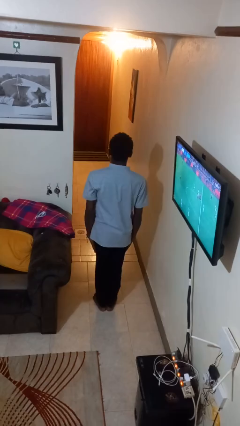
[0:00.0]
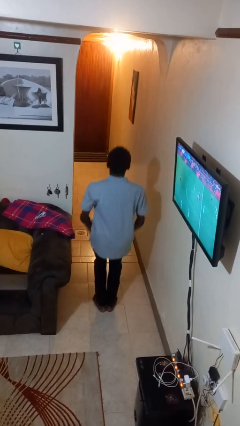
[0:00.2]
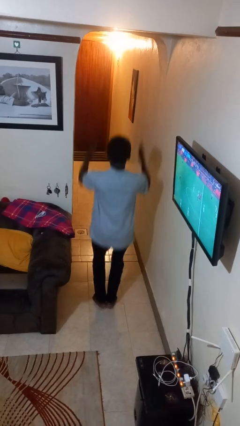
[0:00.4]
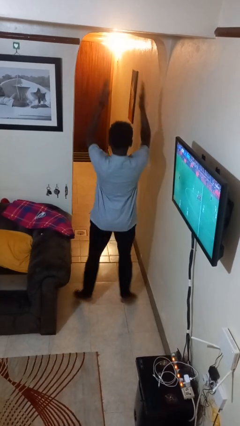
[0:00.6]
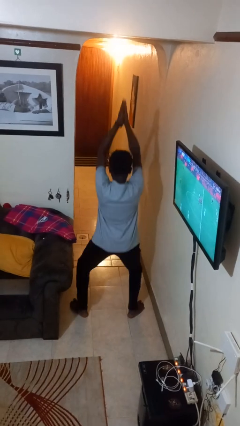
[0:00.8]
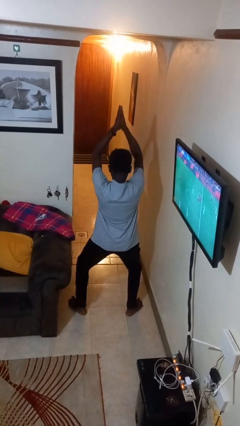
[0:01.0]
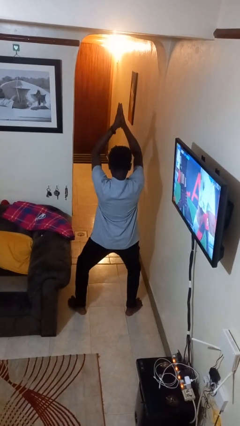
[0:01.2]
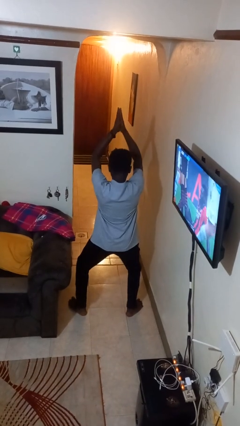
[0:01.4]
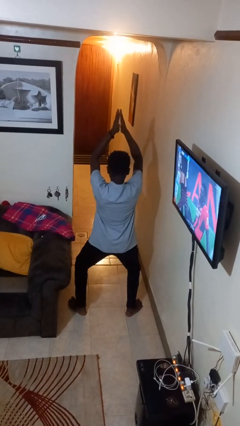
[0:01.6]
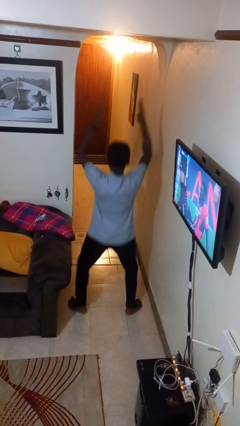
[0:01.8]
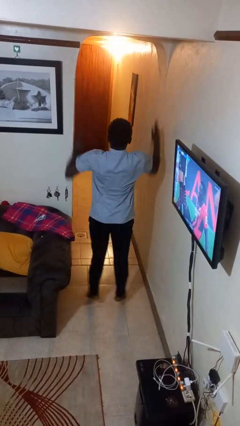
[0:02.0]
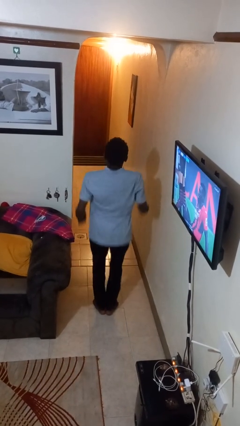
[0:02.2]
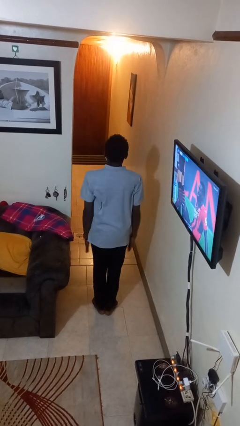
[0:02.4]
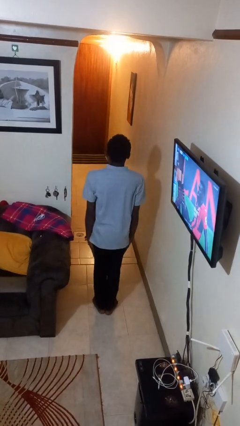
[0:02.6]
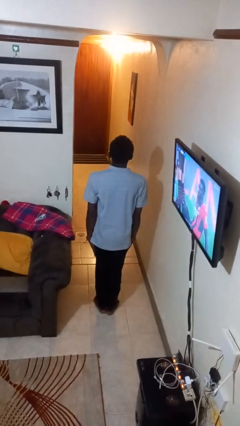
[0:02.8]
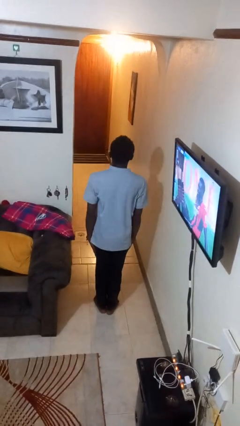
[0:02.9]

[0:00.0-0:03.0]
person exercises with jumping jacks

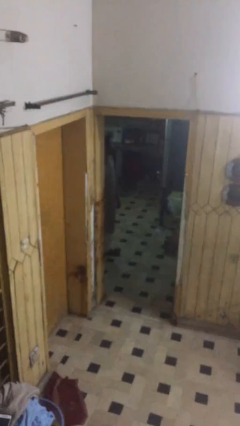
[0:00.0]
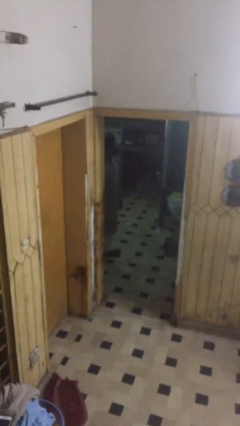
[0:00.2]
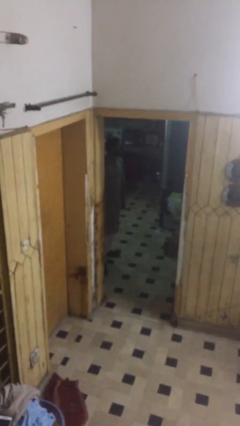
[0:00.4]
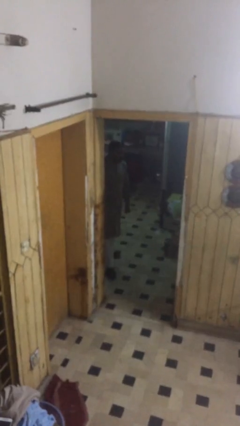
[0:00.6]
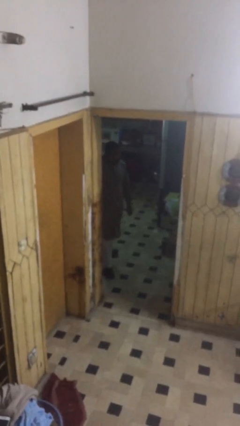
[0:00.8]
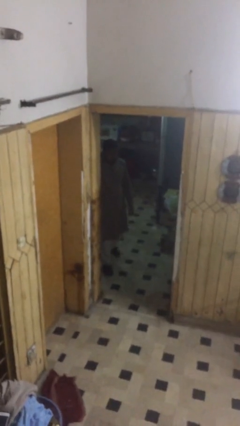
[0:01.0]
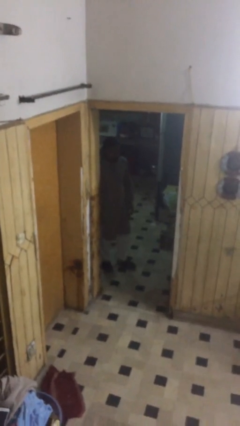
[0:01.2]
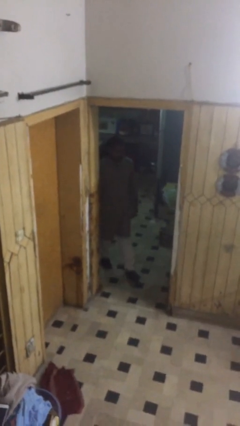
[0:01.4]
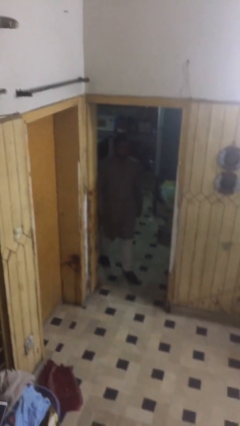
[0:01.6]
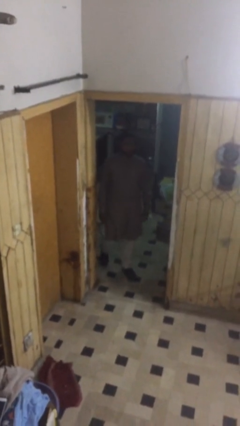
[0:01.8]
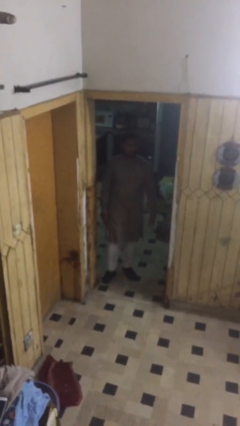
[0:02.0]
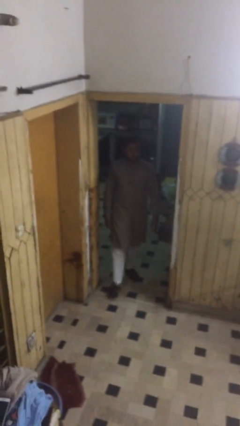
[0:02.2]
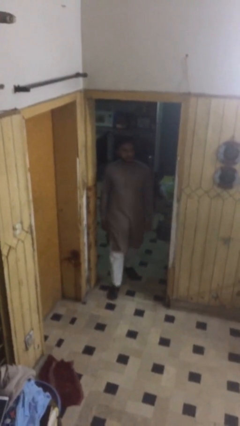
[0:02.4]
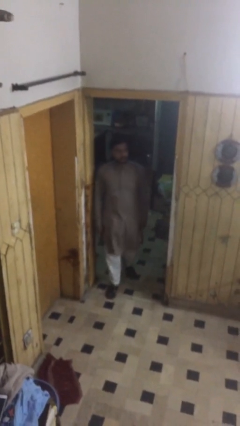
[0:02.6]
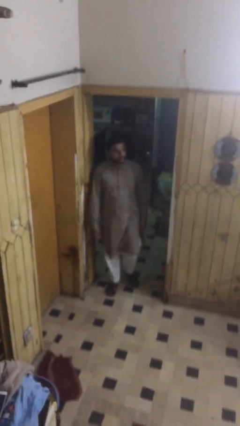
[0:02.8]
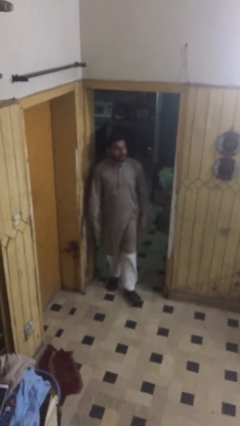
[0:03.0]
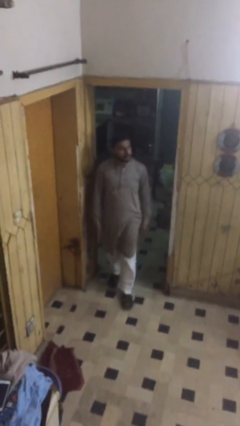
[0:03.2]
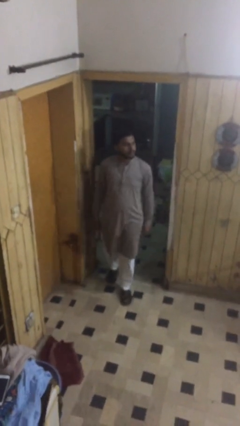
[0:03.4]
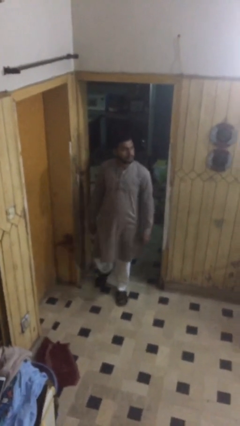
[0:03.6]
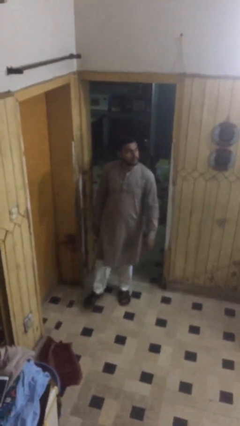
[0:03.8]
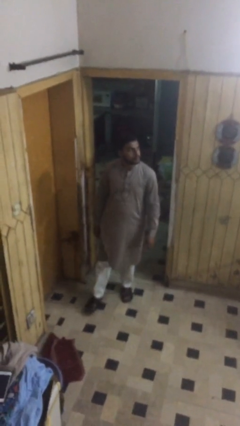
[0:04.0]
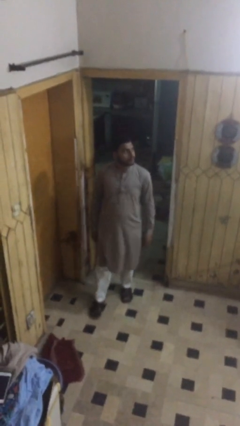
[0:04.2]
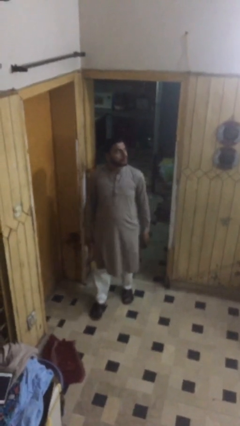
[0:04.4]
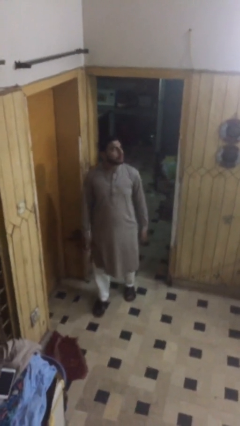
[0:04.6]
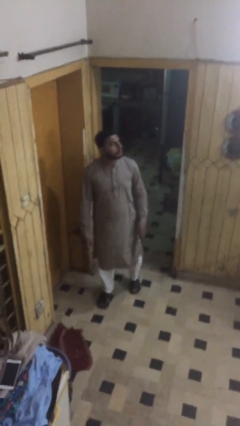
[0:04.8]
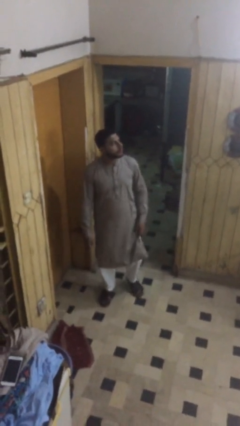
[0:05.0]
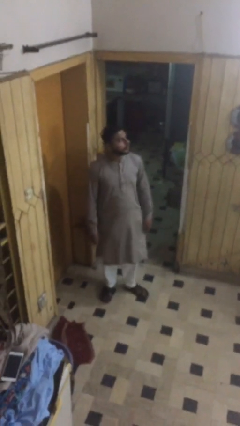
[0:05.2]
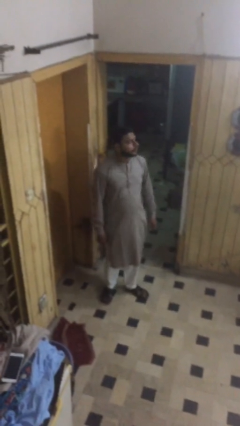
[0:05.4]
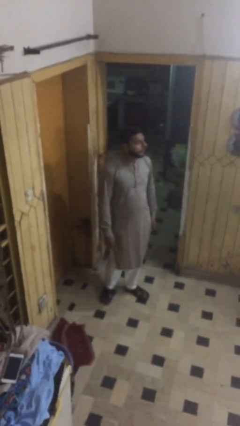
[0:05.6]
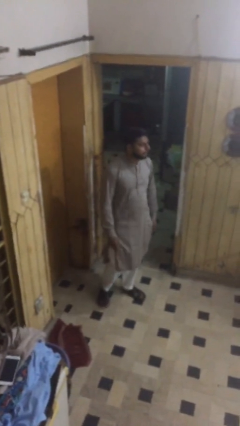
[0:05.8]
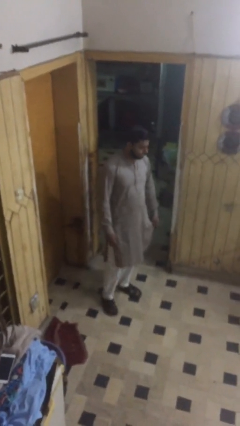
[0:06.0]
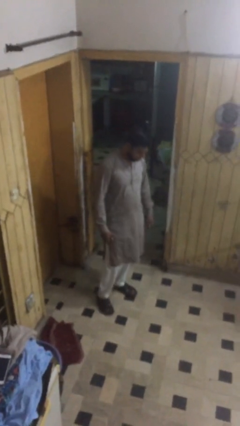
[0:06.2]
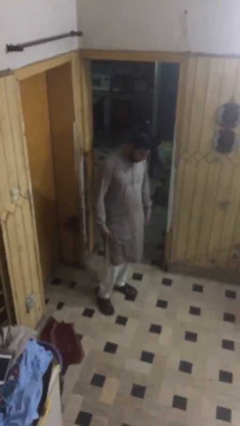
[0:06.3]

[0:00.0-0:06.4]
person enters scene through structure

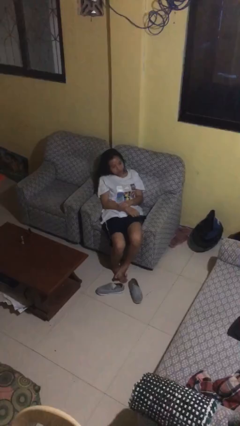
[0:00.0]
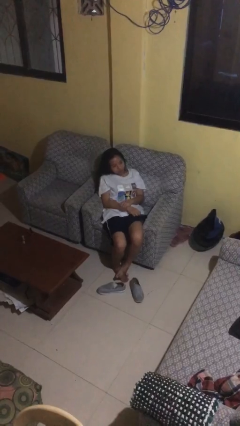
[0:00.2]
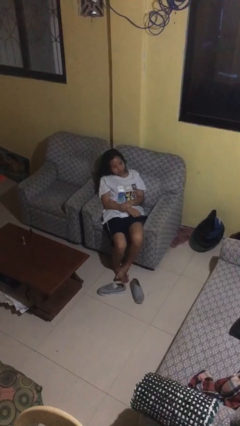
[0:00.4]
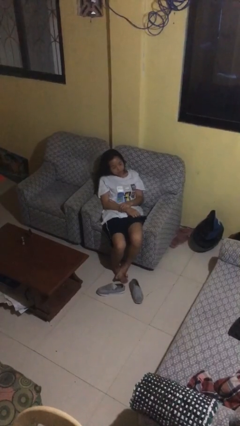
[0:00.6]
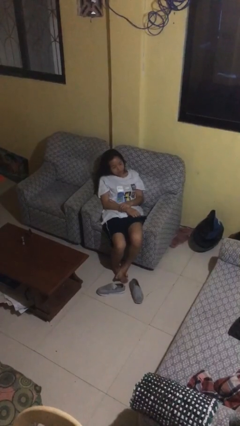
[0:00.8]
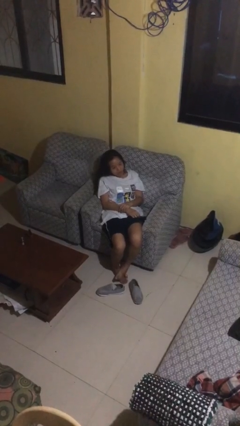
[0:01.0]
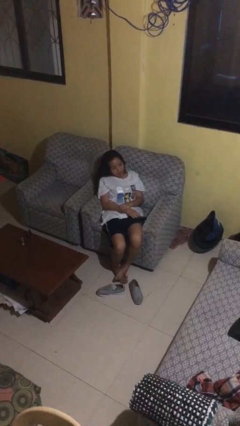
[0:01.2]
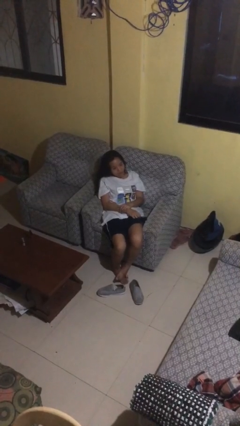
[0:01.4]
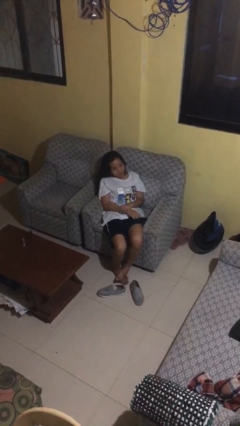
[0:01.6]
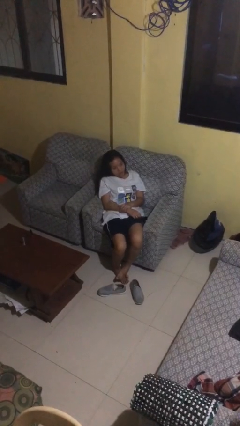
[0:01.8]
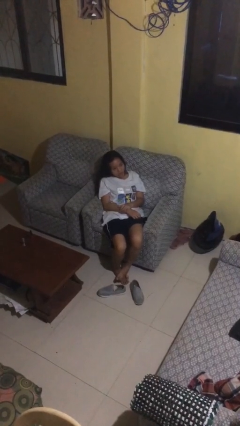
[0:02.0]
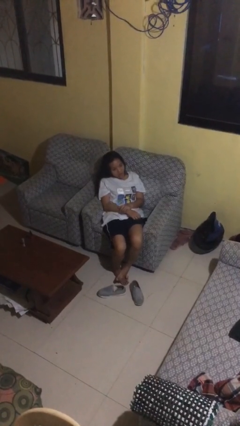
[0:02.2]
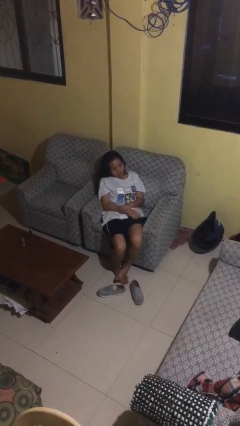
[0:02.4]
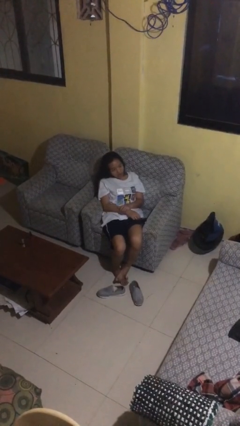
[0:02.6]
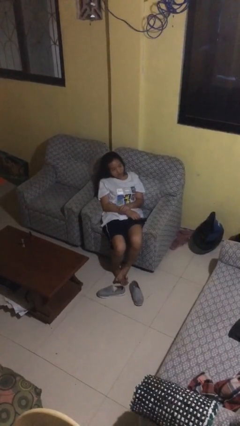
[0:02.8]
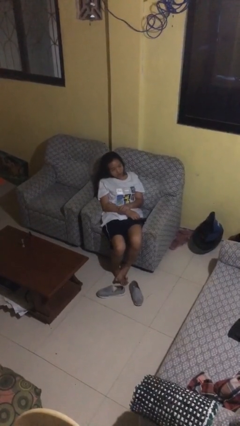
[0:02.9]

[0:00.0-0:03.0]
person sticks out tongue

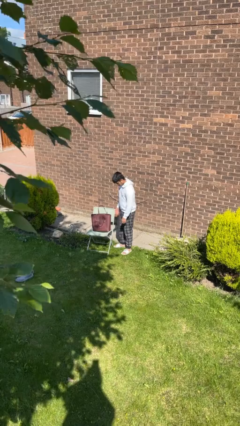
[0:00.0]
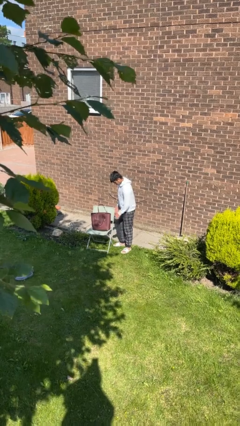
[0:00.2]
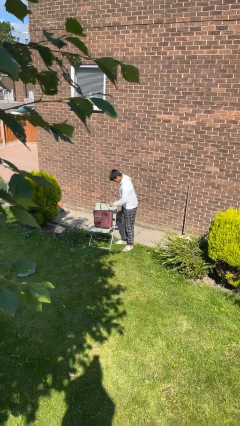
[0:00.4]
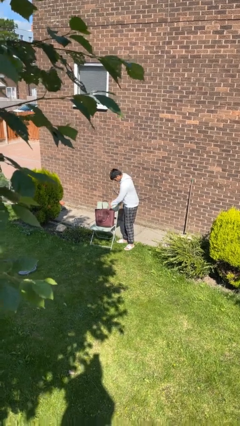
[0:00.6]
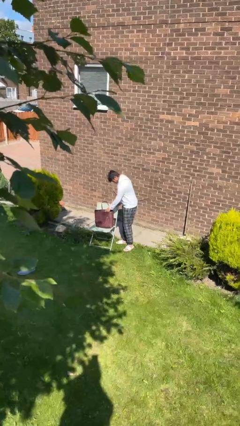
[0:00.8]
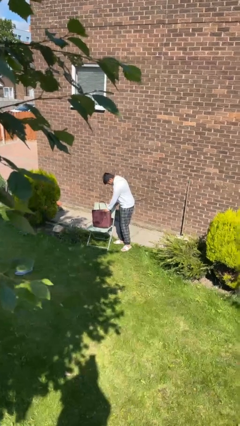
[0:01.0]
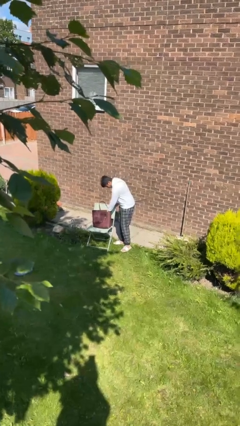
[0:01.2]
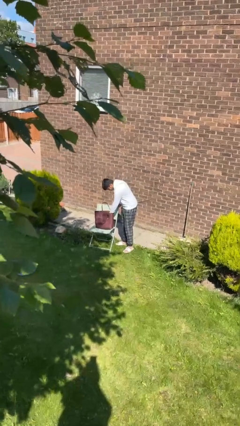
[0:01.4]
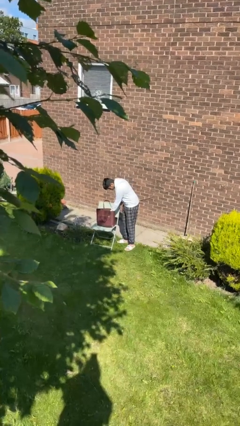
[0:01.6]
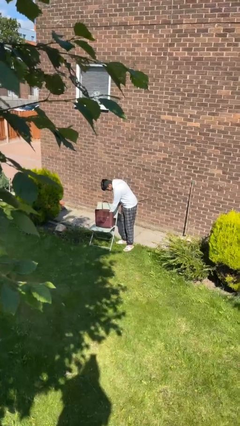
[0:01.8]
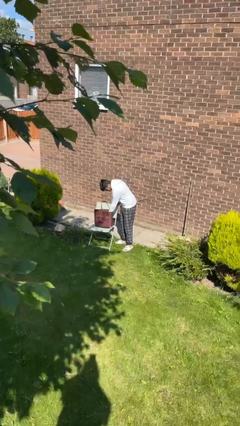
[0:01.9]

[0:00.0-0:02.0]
person searches in purse

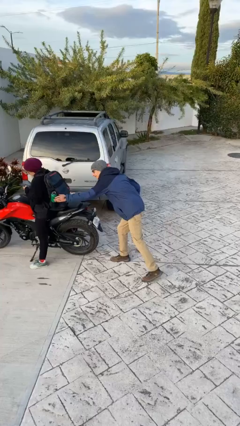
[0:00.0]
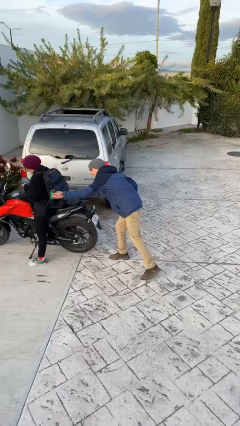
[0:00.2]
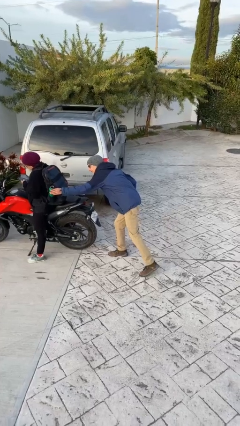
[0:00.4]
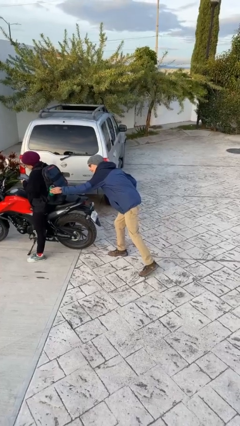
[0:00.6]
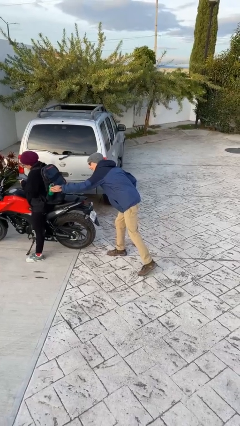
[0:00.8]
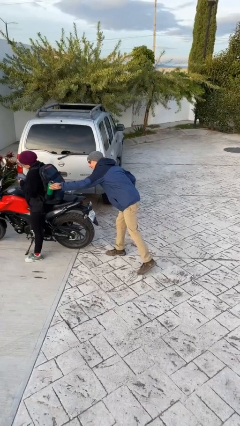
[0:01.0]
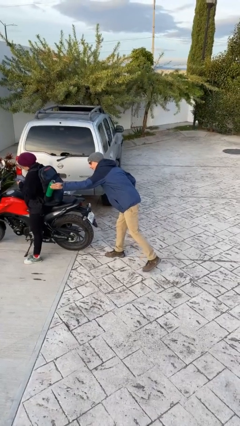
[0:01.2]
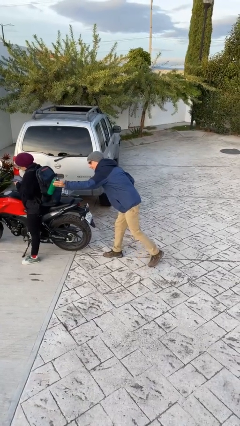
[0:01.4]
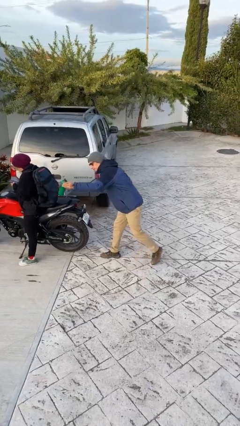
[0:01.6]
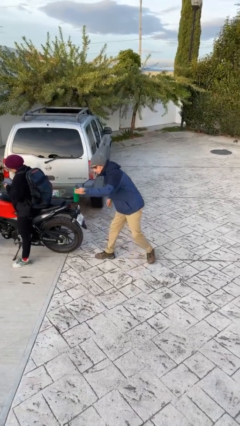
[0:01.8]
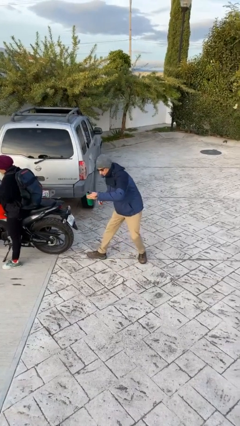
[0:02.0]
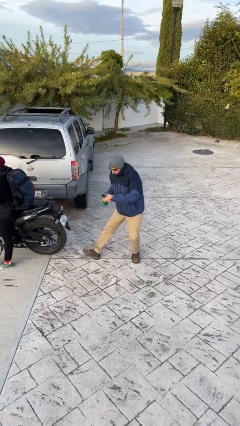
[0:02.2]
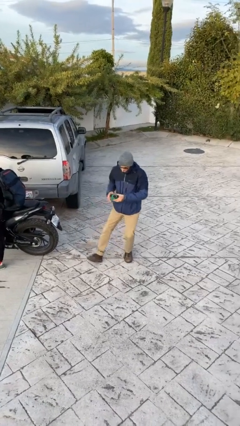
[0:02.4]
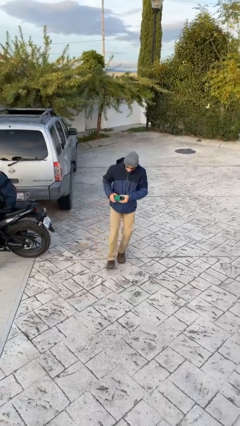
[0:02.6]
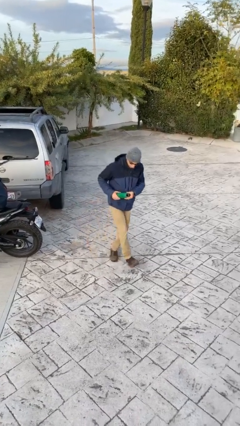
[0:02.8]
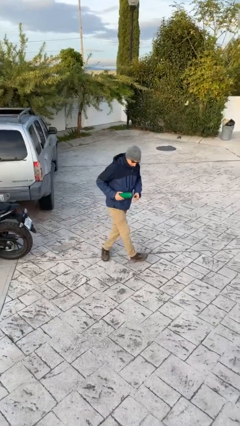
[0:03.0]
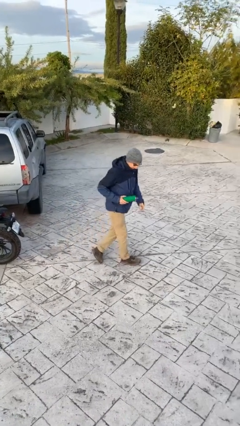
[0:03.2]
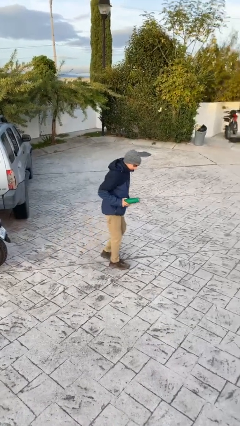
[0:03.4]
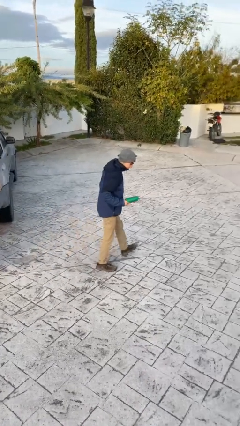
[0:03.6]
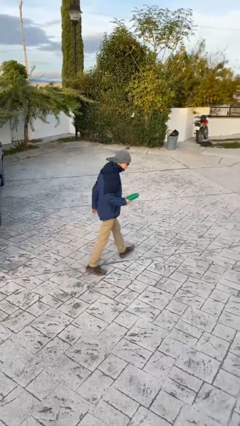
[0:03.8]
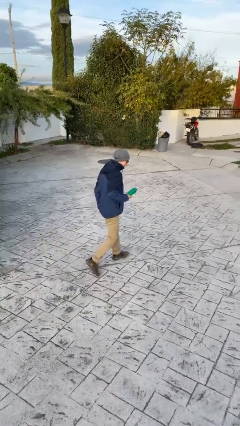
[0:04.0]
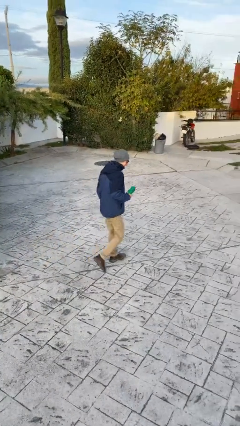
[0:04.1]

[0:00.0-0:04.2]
person steals object from person
